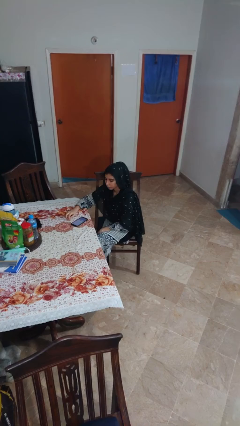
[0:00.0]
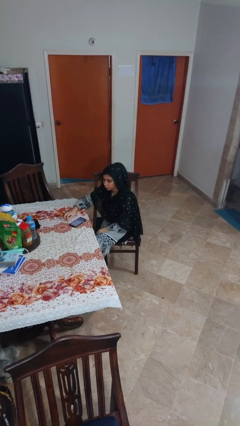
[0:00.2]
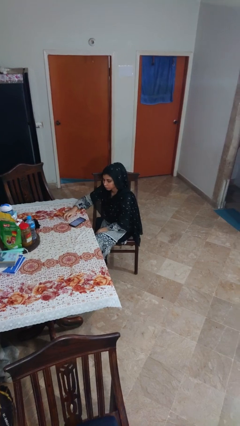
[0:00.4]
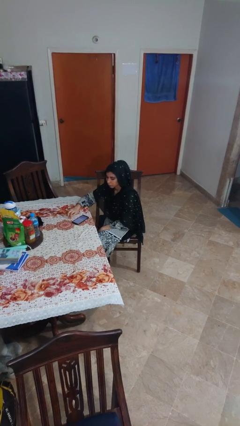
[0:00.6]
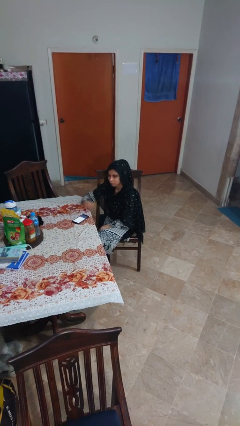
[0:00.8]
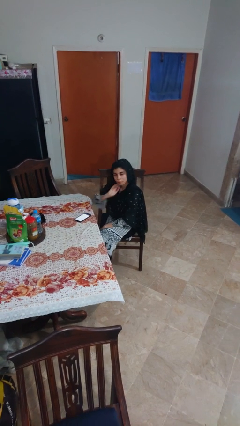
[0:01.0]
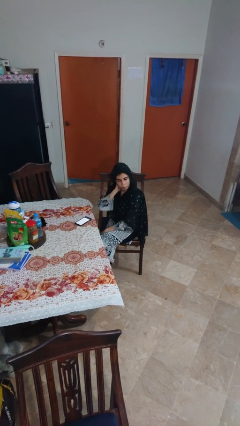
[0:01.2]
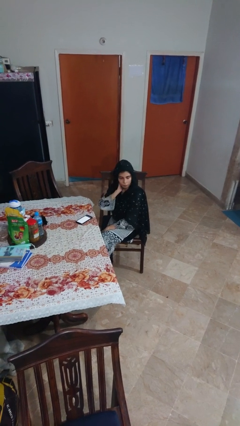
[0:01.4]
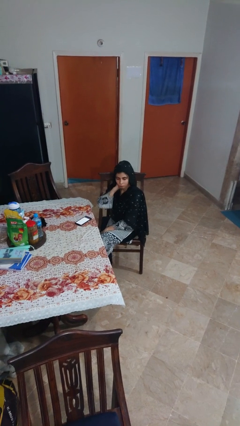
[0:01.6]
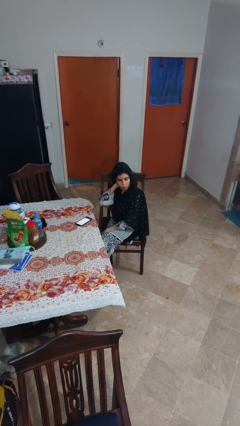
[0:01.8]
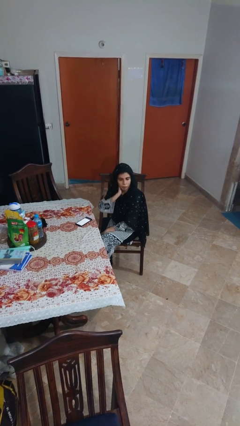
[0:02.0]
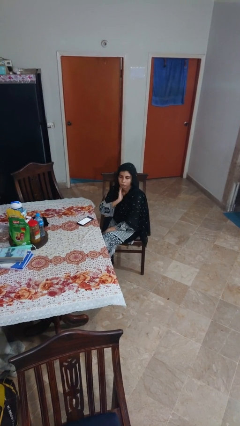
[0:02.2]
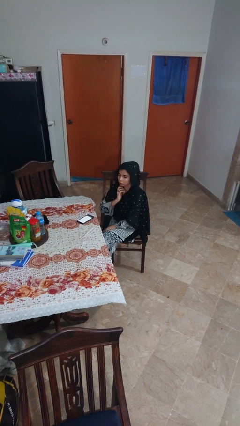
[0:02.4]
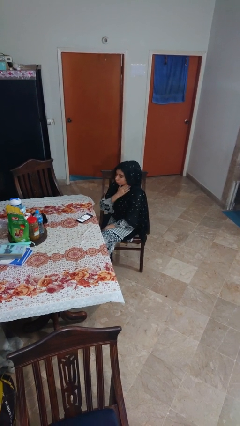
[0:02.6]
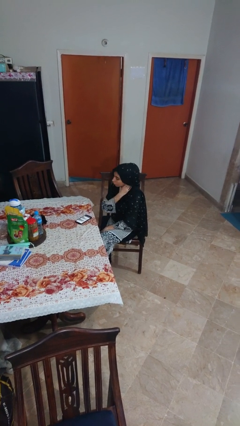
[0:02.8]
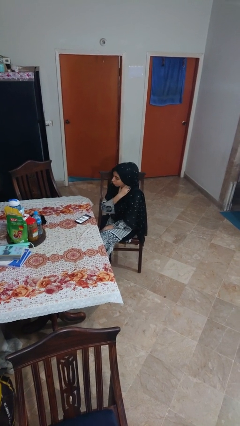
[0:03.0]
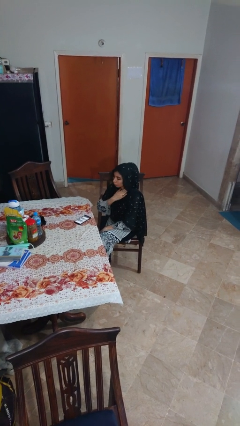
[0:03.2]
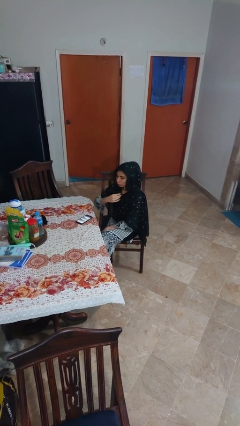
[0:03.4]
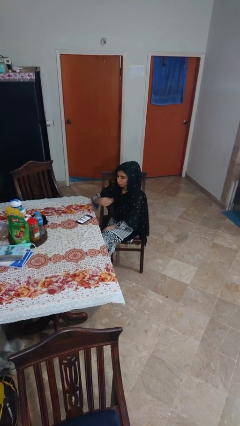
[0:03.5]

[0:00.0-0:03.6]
person rubs neck

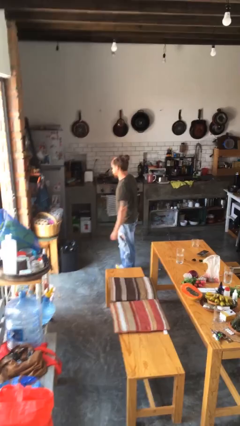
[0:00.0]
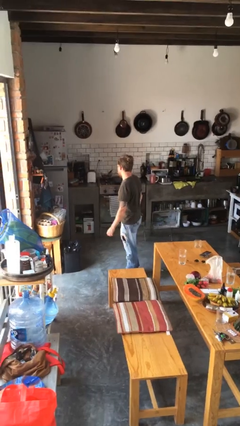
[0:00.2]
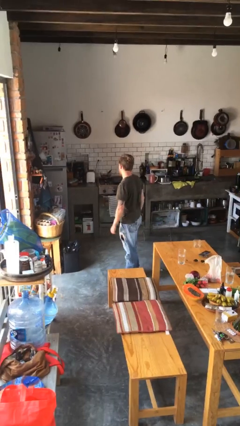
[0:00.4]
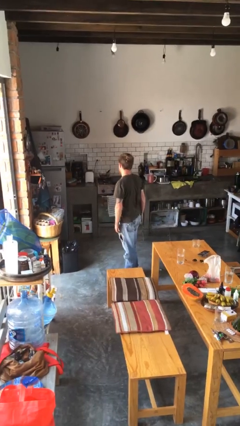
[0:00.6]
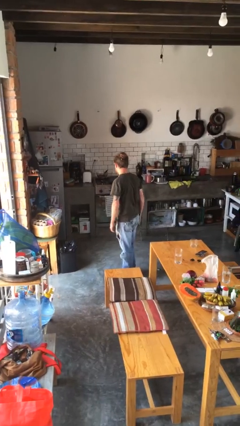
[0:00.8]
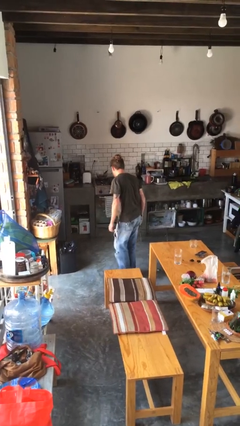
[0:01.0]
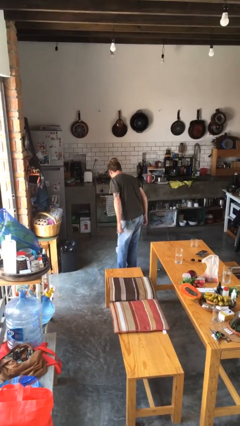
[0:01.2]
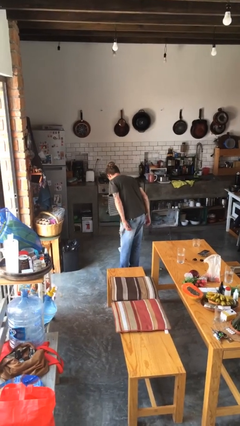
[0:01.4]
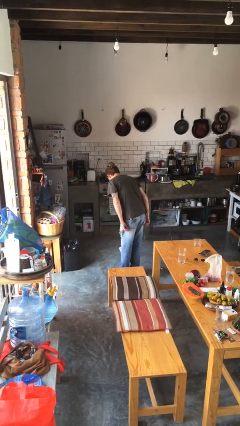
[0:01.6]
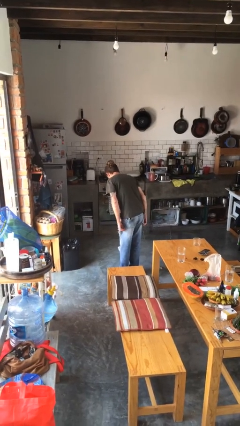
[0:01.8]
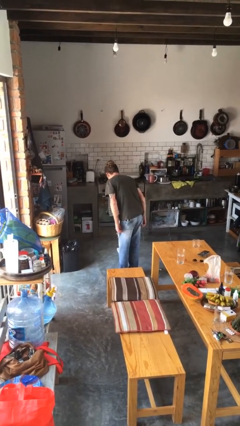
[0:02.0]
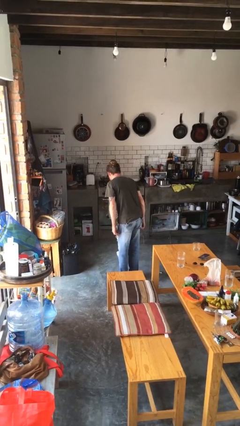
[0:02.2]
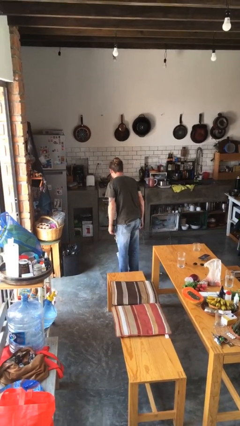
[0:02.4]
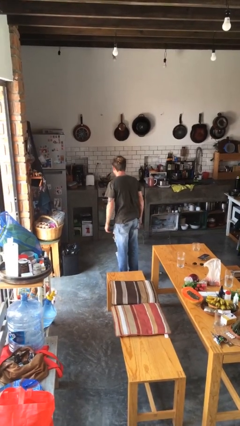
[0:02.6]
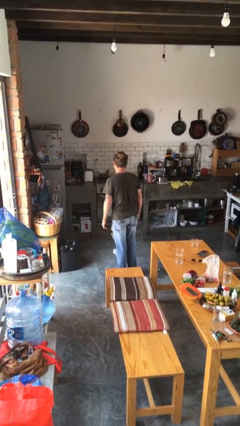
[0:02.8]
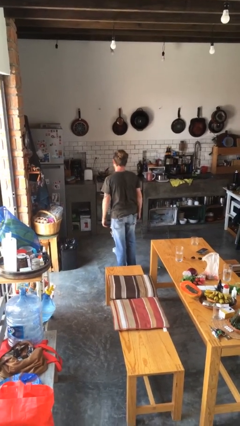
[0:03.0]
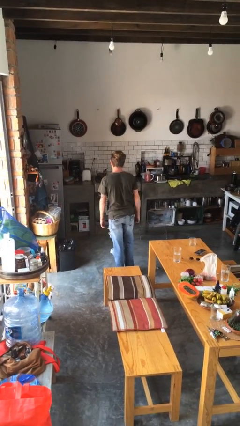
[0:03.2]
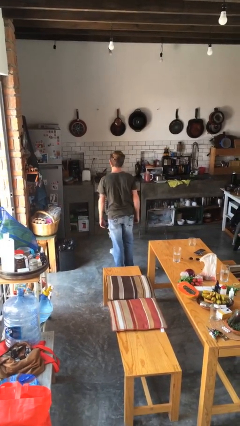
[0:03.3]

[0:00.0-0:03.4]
person bows

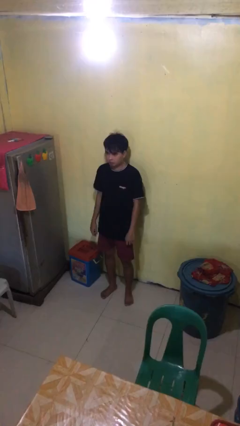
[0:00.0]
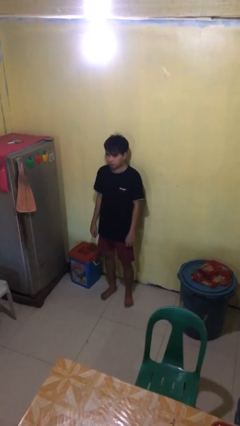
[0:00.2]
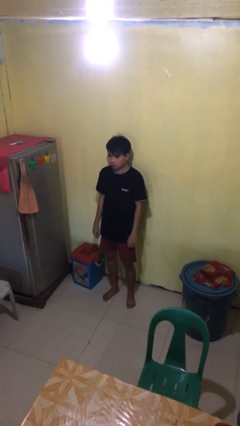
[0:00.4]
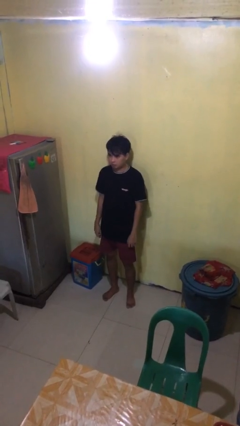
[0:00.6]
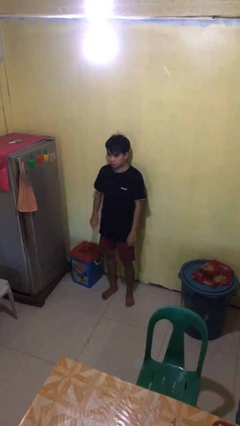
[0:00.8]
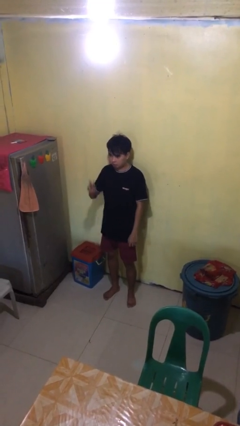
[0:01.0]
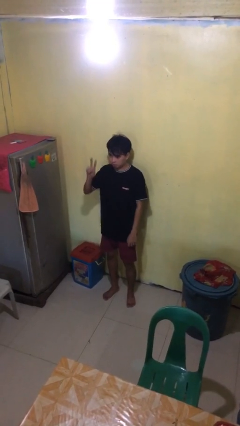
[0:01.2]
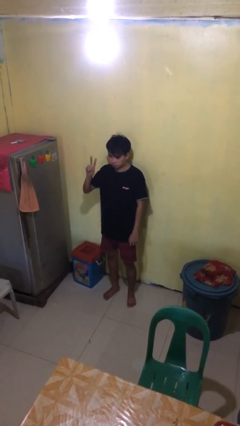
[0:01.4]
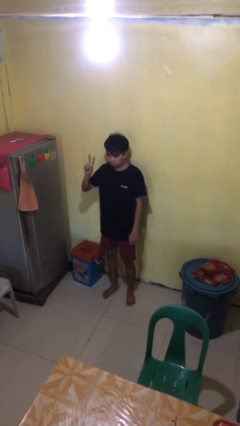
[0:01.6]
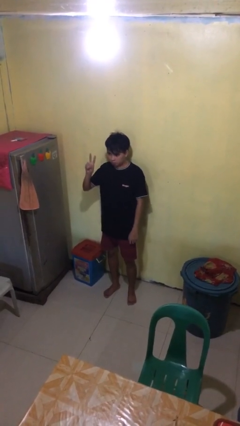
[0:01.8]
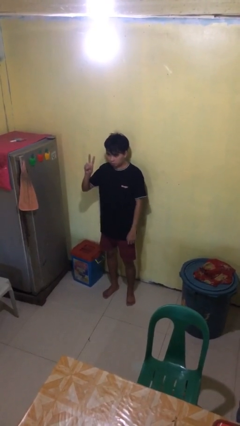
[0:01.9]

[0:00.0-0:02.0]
person gestures peace

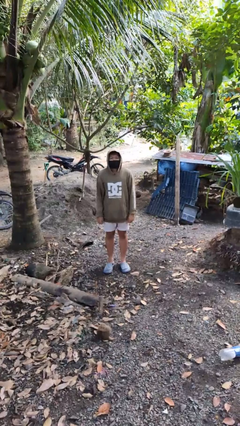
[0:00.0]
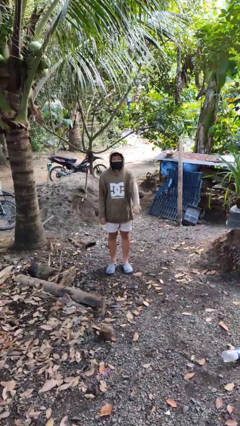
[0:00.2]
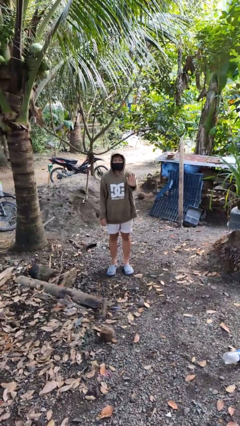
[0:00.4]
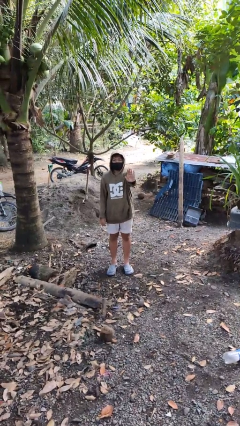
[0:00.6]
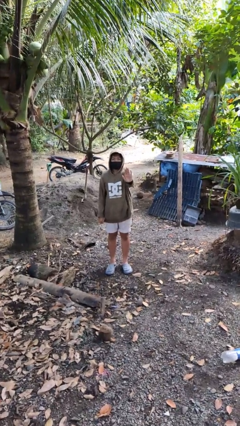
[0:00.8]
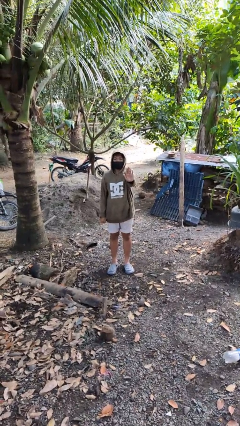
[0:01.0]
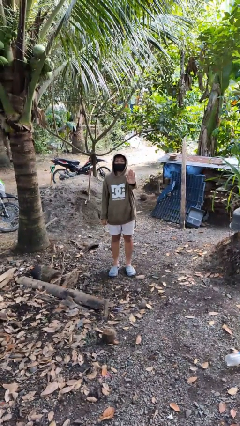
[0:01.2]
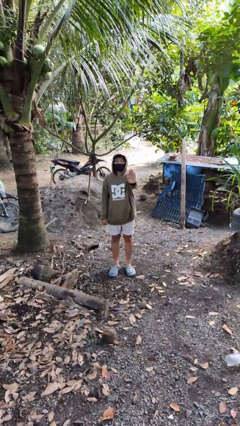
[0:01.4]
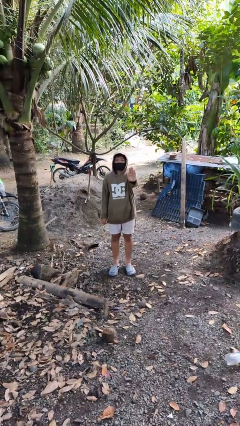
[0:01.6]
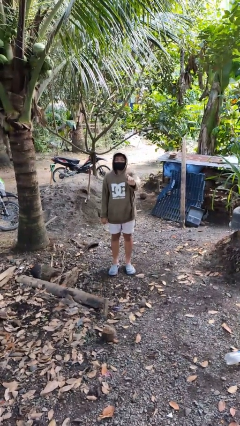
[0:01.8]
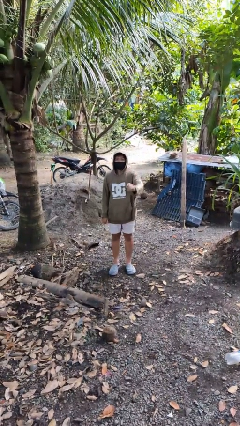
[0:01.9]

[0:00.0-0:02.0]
person gestures stop

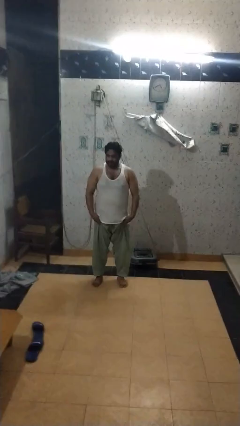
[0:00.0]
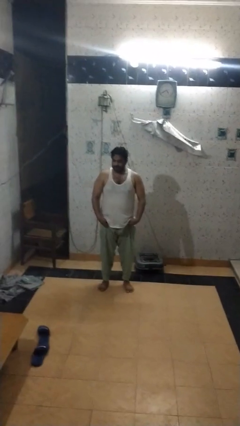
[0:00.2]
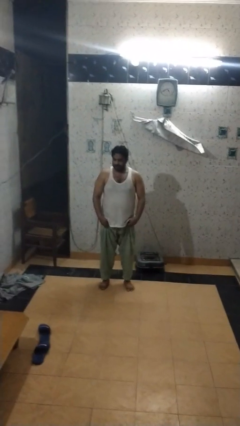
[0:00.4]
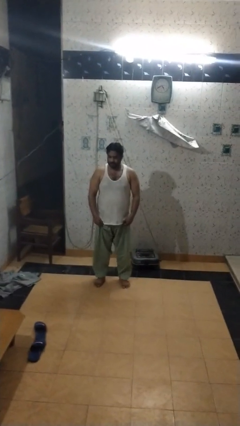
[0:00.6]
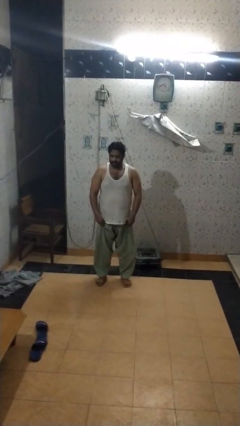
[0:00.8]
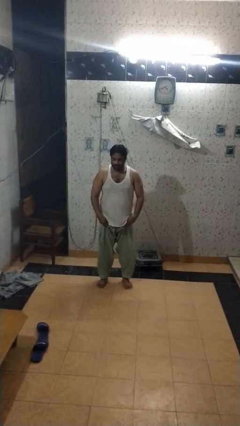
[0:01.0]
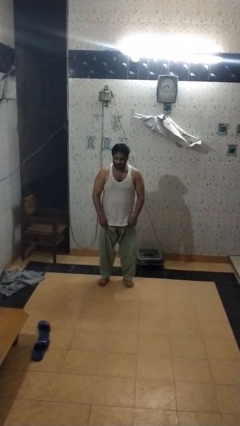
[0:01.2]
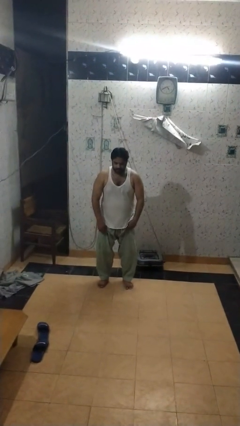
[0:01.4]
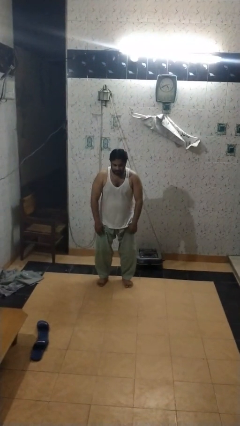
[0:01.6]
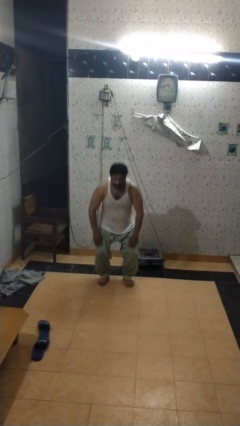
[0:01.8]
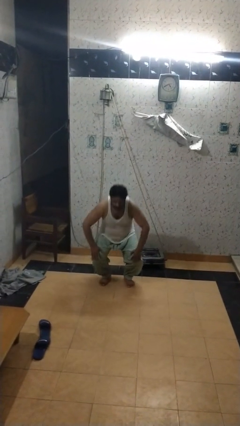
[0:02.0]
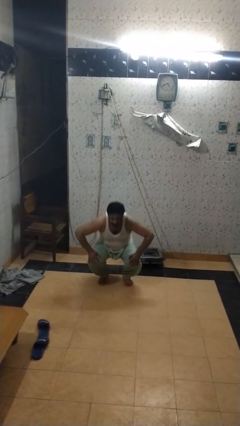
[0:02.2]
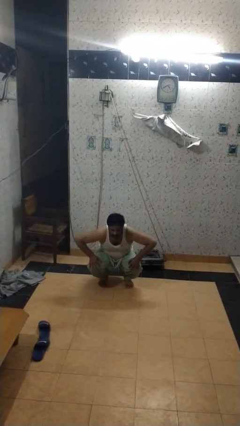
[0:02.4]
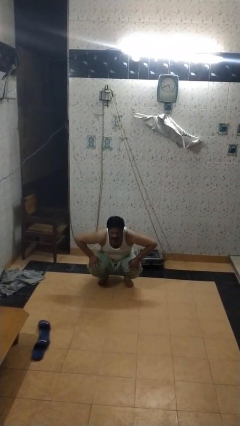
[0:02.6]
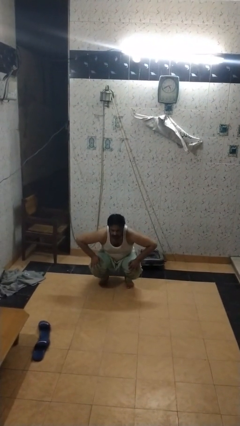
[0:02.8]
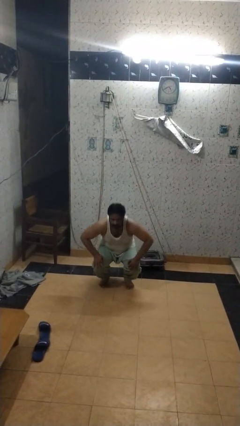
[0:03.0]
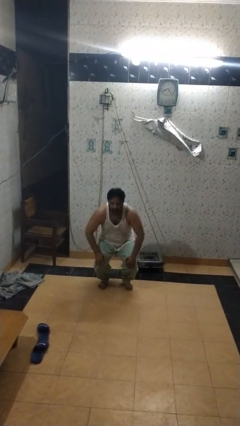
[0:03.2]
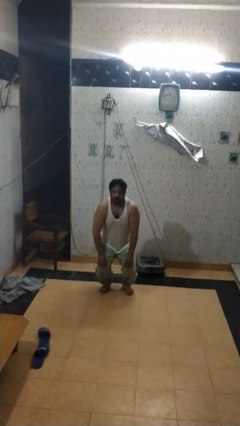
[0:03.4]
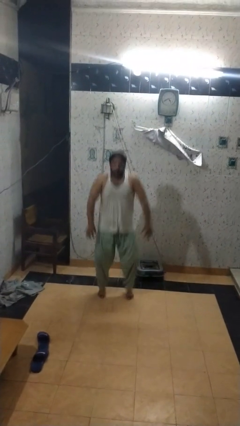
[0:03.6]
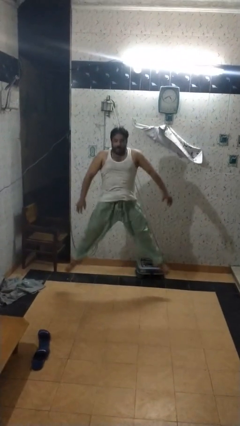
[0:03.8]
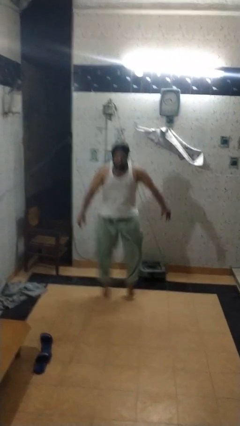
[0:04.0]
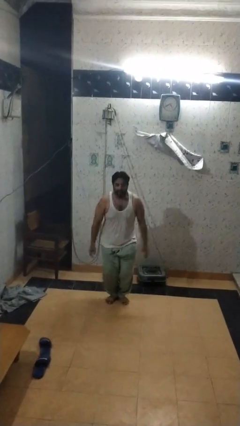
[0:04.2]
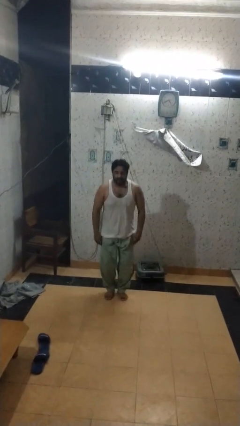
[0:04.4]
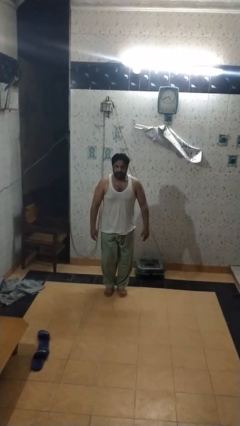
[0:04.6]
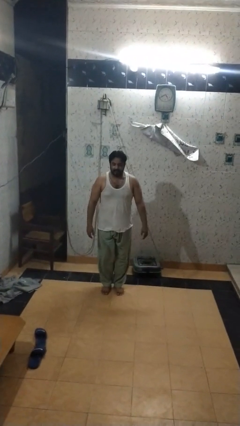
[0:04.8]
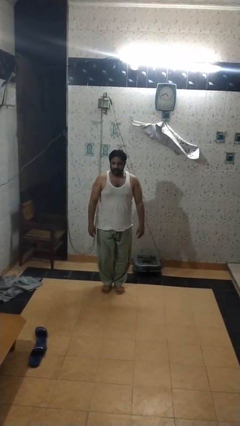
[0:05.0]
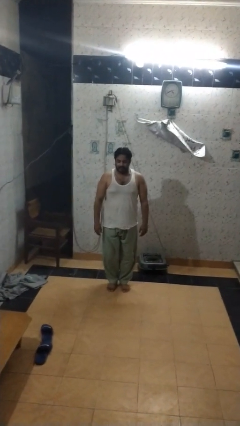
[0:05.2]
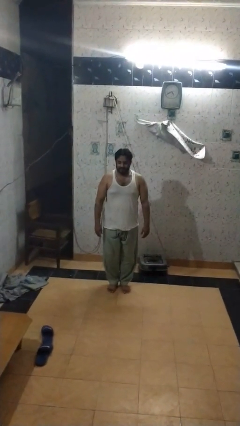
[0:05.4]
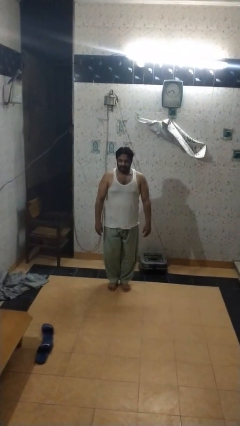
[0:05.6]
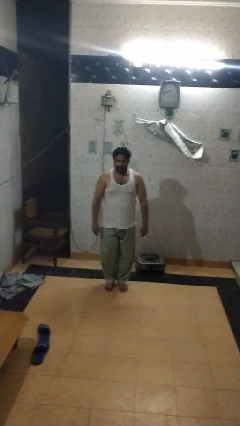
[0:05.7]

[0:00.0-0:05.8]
person exercises with jumping jacks

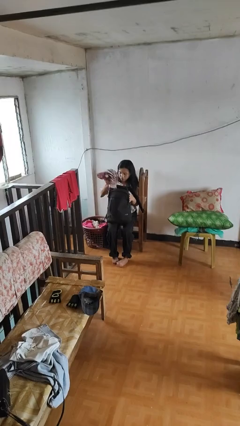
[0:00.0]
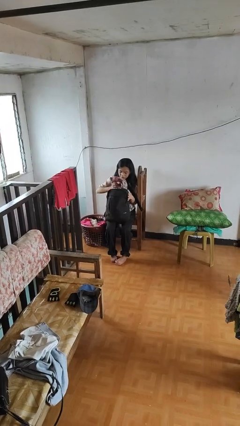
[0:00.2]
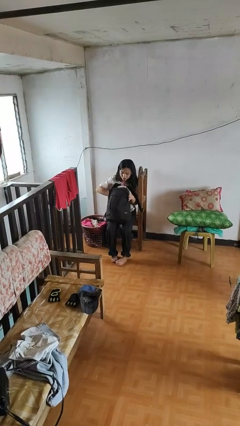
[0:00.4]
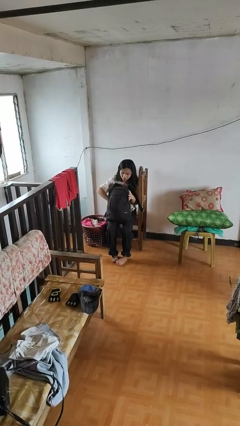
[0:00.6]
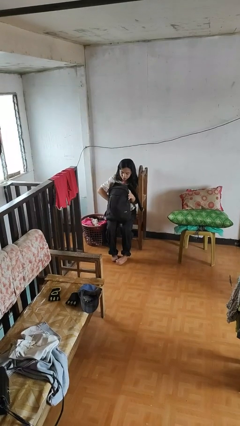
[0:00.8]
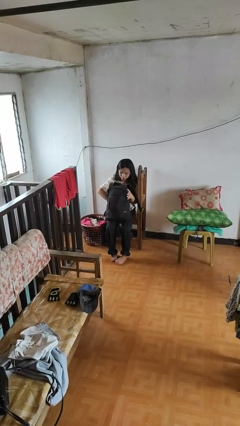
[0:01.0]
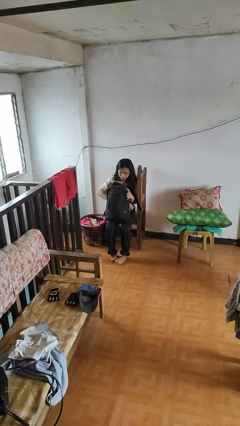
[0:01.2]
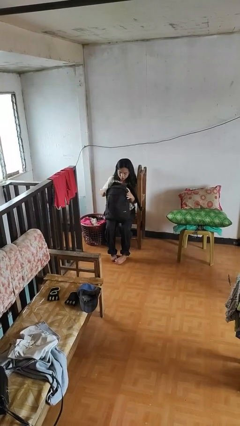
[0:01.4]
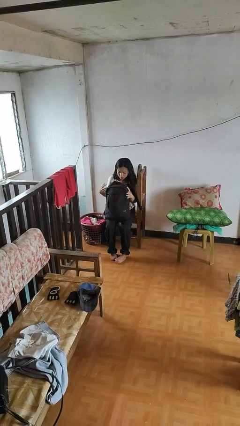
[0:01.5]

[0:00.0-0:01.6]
person puts object into backpack
